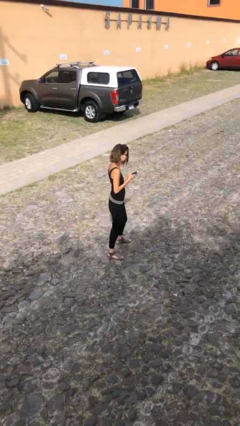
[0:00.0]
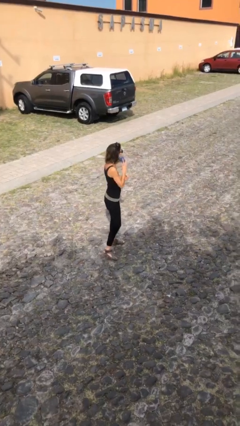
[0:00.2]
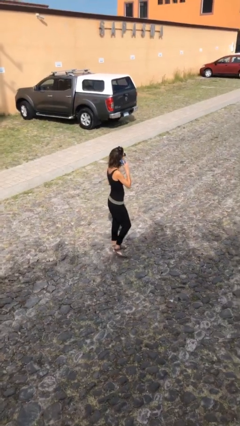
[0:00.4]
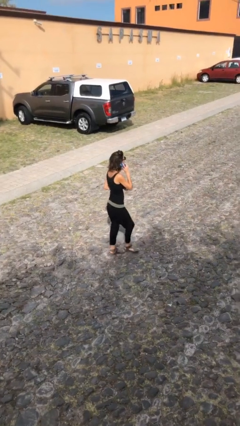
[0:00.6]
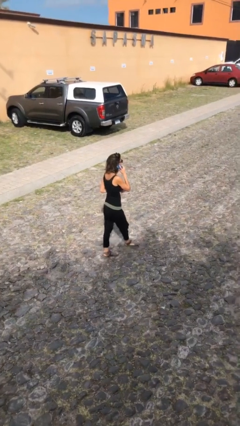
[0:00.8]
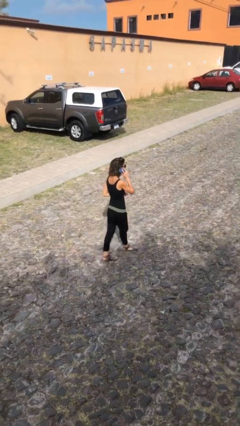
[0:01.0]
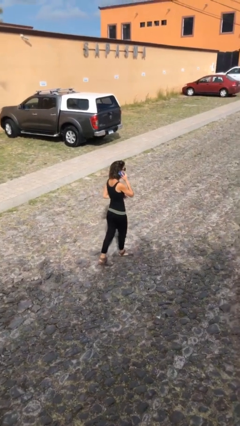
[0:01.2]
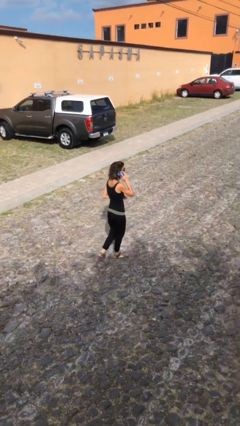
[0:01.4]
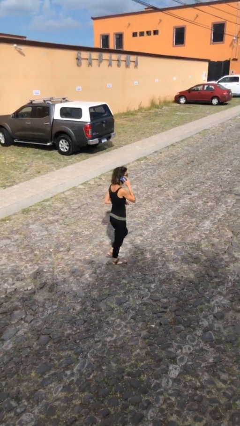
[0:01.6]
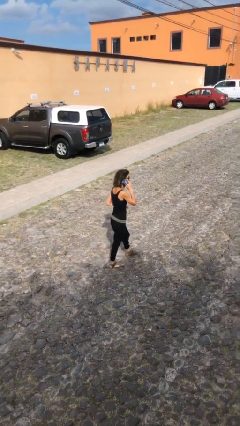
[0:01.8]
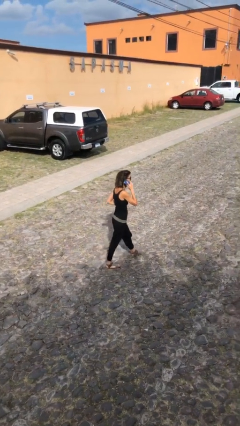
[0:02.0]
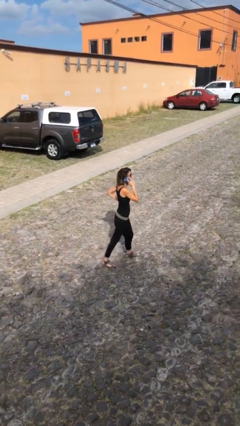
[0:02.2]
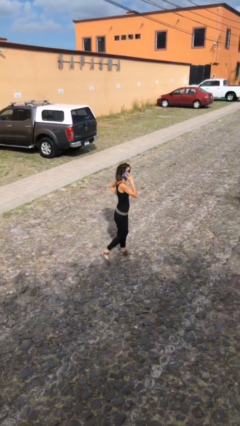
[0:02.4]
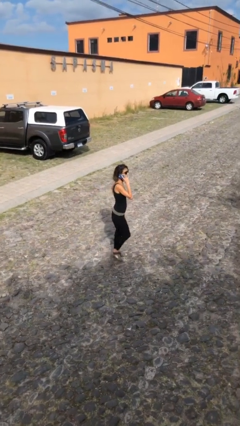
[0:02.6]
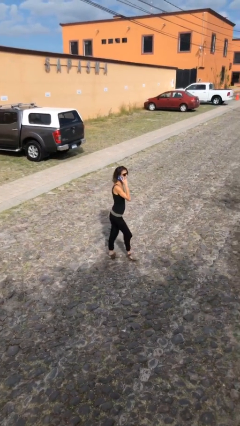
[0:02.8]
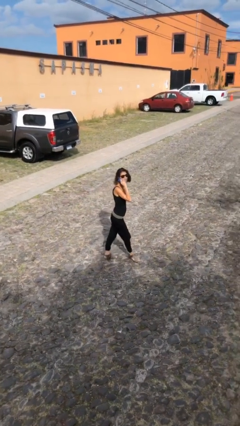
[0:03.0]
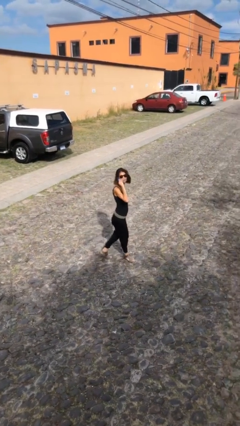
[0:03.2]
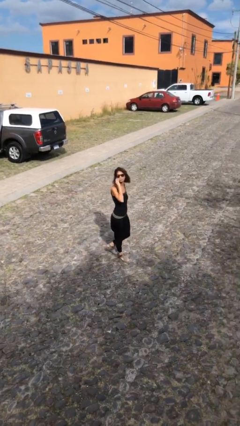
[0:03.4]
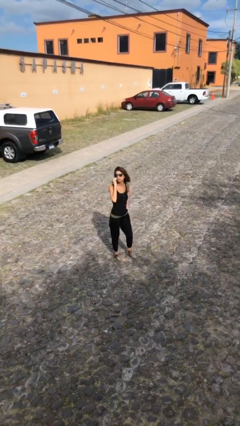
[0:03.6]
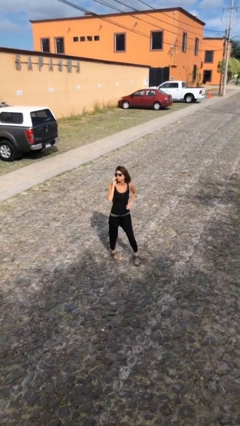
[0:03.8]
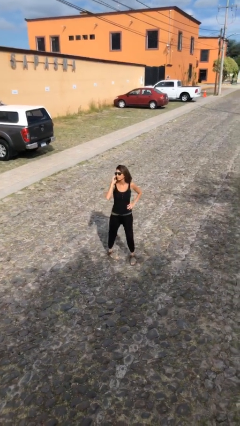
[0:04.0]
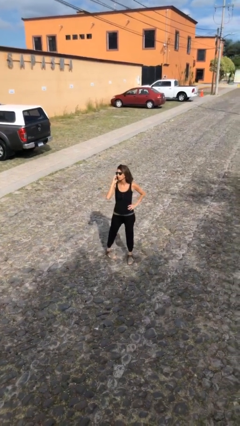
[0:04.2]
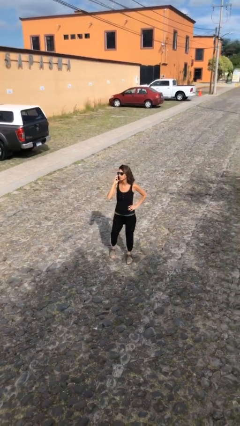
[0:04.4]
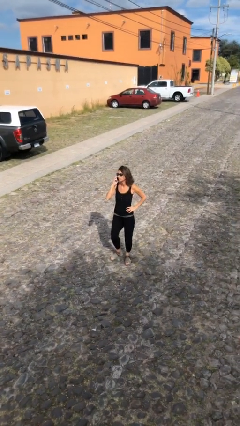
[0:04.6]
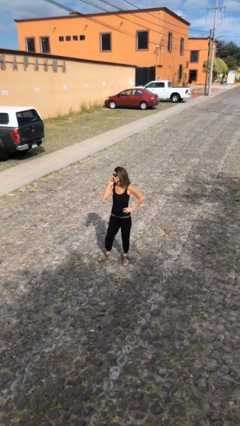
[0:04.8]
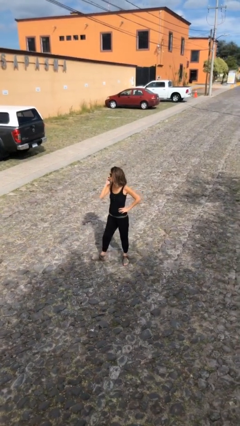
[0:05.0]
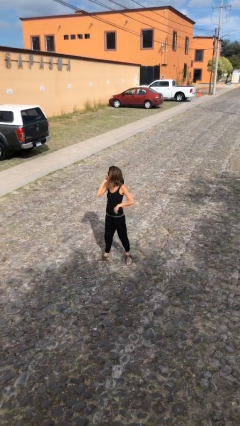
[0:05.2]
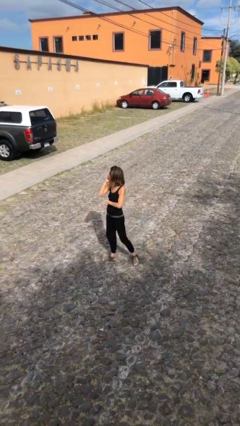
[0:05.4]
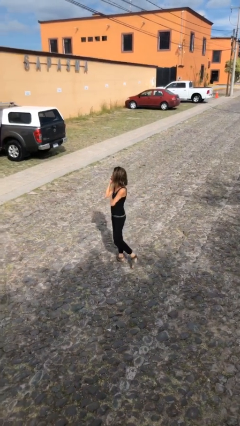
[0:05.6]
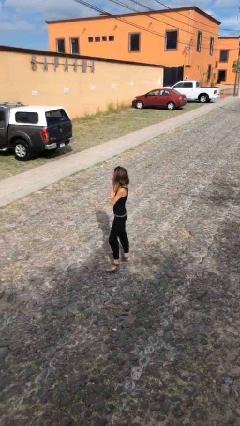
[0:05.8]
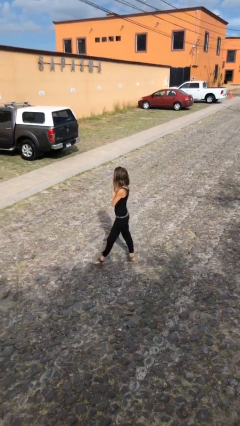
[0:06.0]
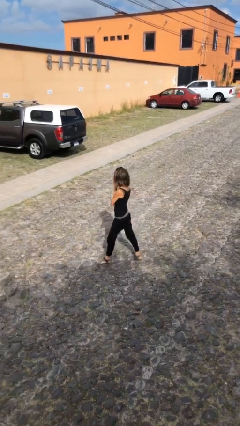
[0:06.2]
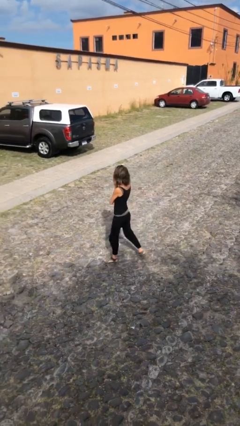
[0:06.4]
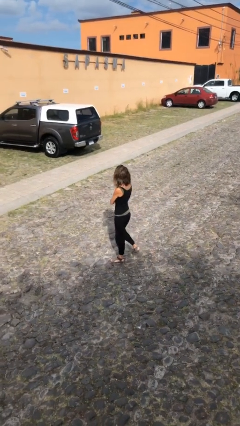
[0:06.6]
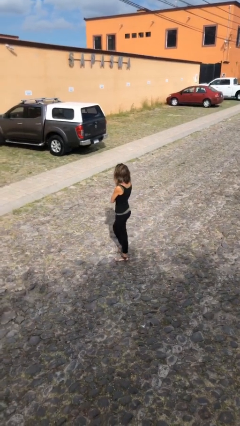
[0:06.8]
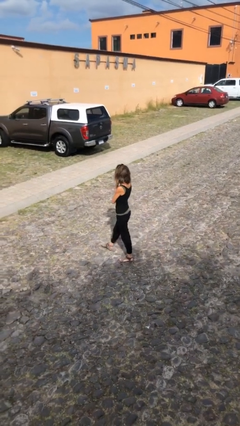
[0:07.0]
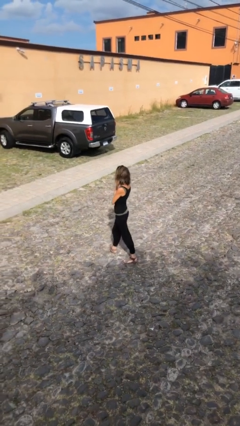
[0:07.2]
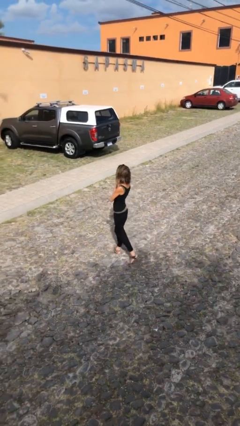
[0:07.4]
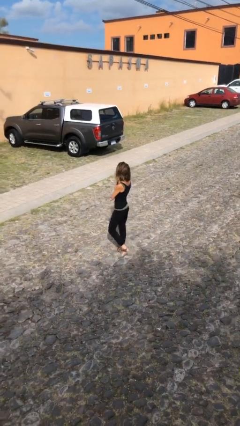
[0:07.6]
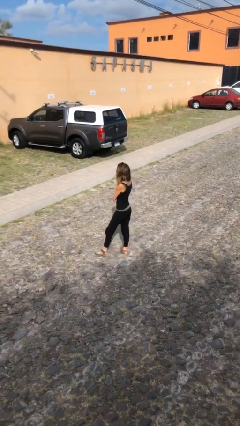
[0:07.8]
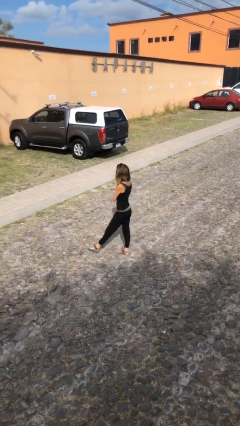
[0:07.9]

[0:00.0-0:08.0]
person talks on phone

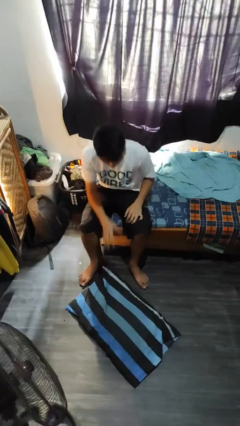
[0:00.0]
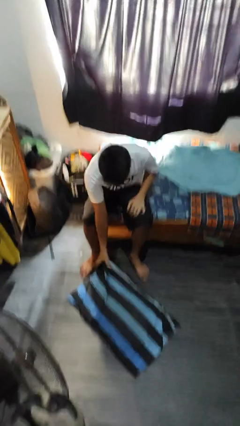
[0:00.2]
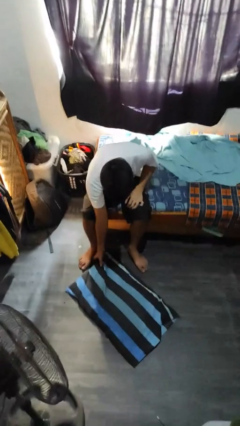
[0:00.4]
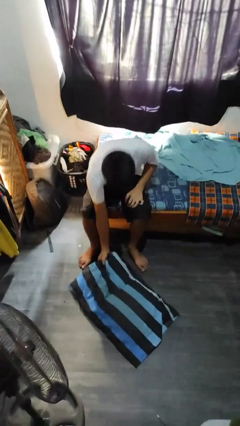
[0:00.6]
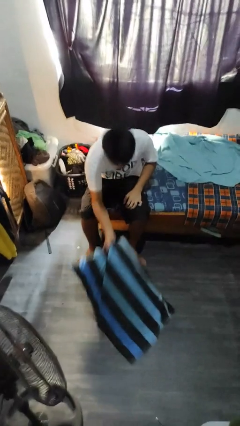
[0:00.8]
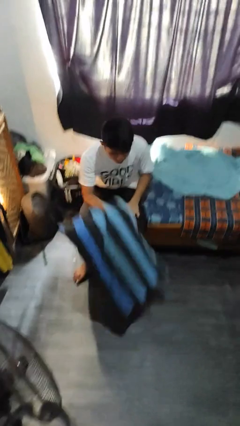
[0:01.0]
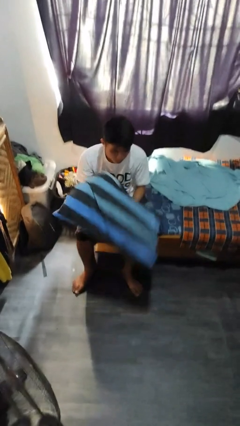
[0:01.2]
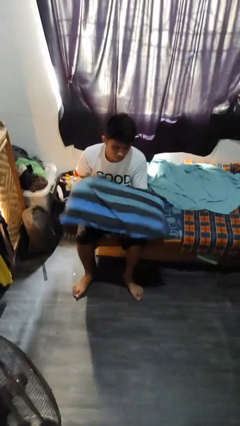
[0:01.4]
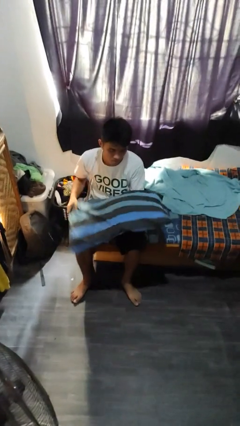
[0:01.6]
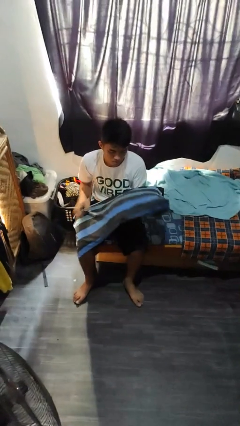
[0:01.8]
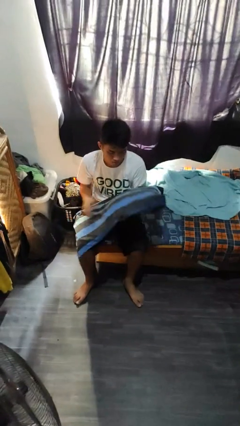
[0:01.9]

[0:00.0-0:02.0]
person picks up object from floor

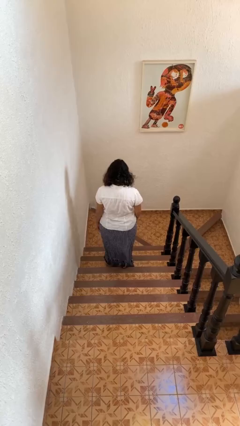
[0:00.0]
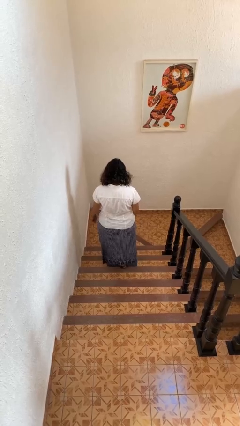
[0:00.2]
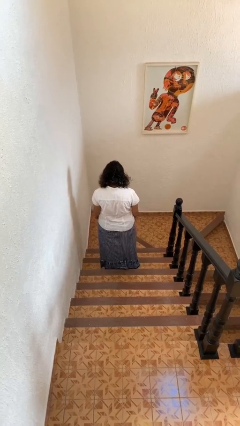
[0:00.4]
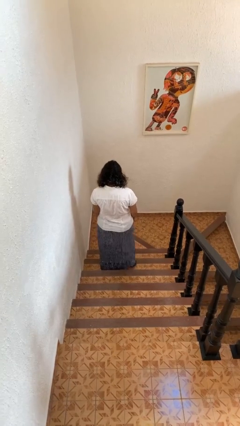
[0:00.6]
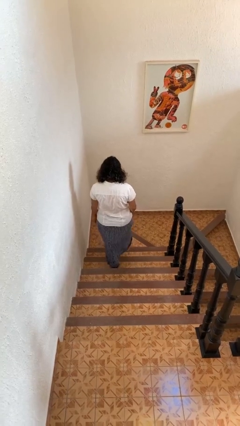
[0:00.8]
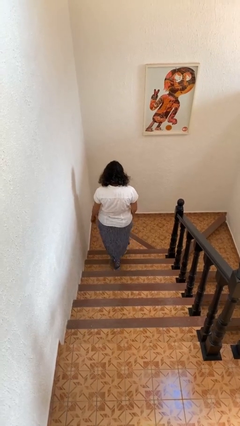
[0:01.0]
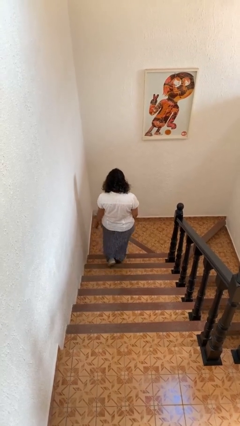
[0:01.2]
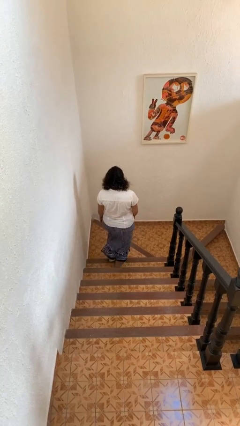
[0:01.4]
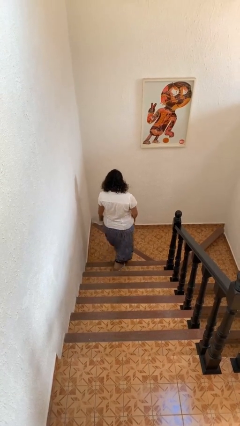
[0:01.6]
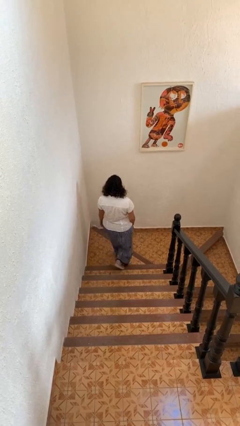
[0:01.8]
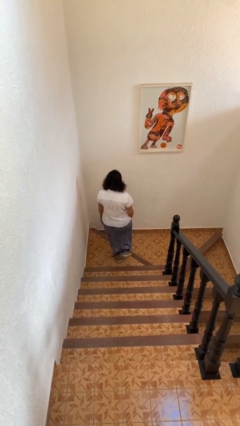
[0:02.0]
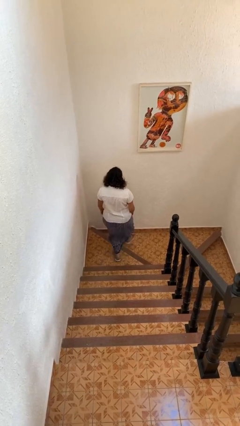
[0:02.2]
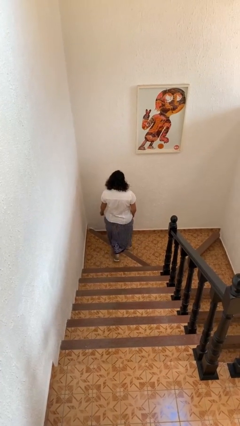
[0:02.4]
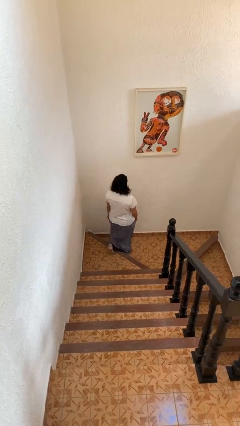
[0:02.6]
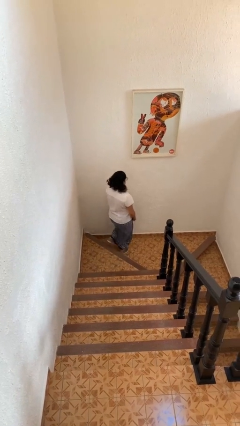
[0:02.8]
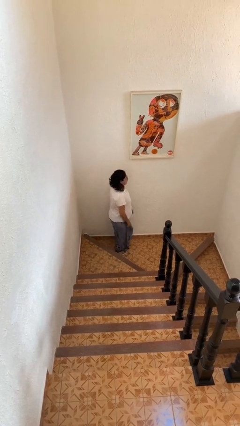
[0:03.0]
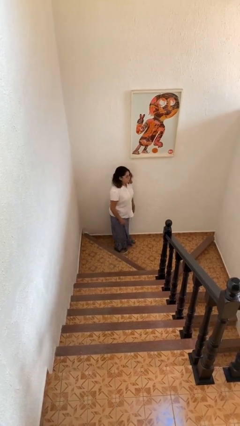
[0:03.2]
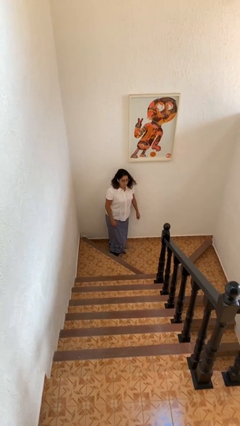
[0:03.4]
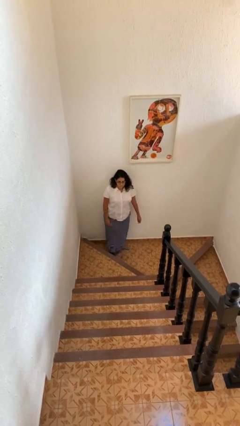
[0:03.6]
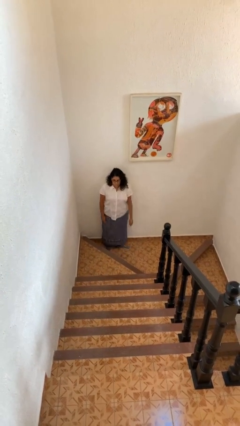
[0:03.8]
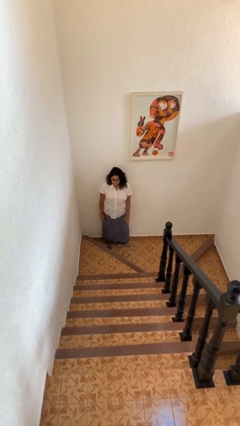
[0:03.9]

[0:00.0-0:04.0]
person climbs down stairs

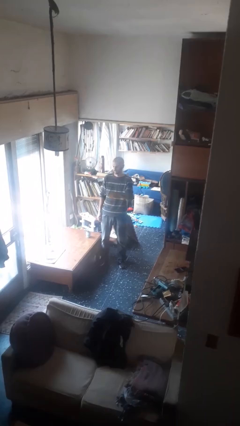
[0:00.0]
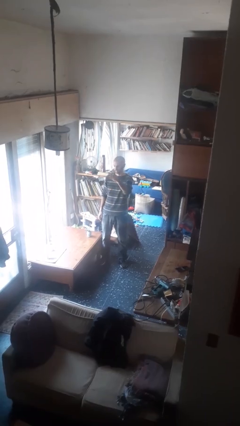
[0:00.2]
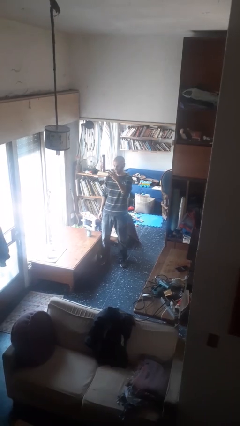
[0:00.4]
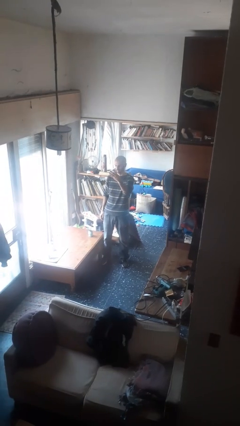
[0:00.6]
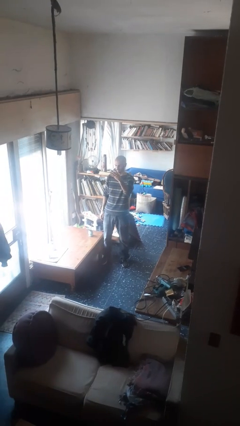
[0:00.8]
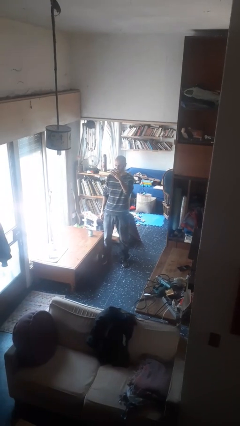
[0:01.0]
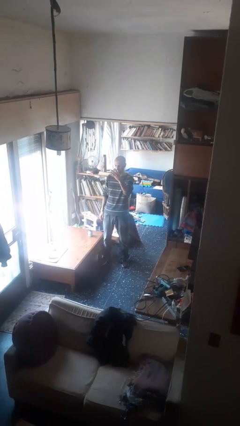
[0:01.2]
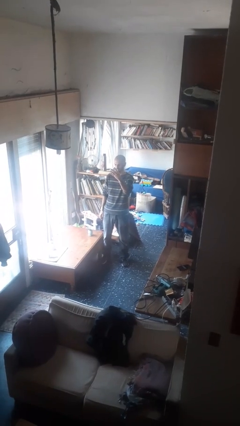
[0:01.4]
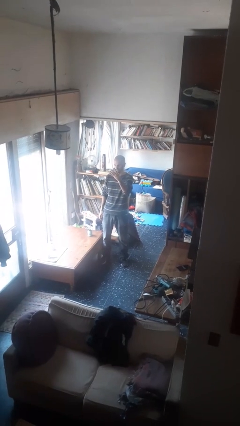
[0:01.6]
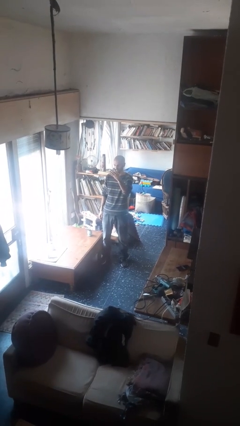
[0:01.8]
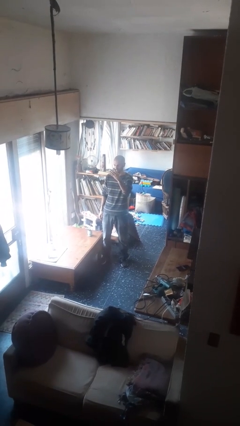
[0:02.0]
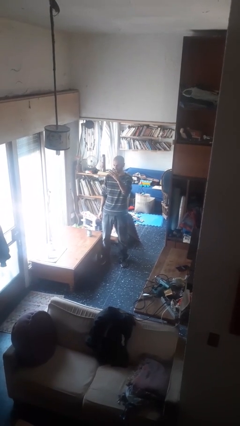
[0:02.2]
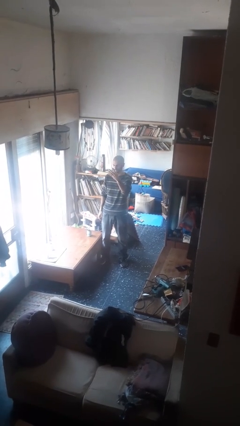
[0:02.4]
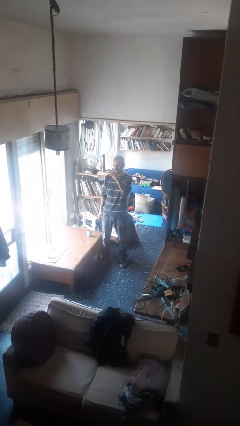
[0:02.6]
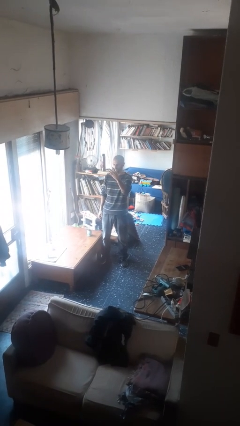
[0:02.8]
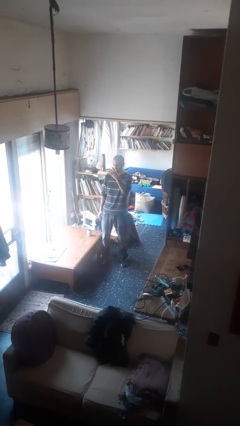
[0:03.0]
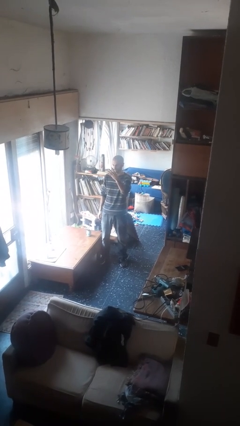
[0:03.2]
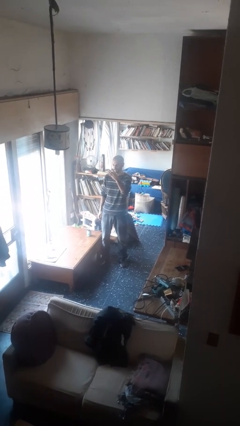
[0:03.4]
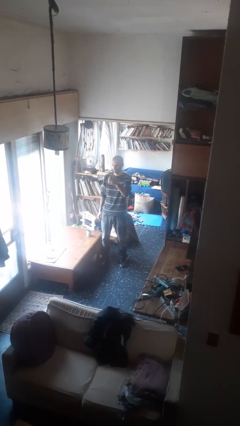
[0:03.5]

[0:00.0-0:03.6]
person gestures number four

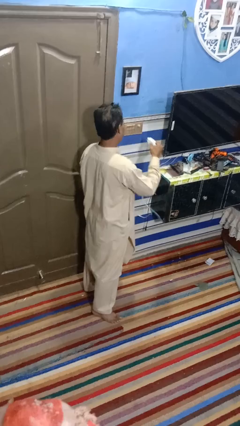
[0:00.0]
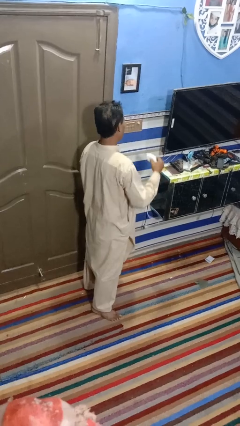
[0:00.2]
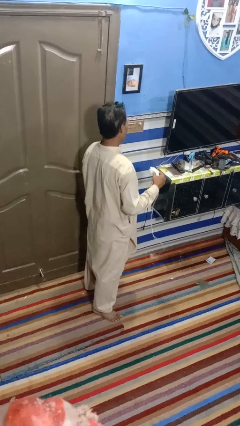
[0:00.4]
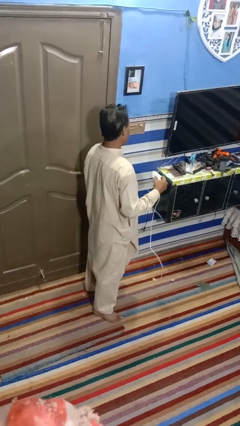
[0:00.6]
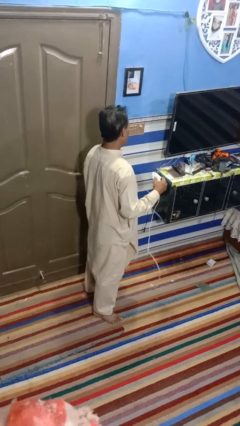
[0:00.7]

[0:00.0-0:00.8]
person unplugs from electrical socket
